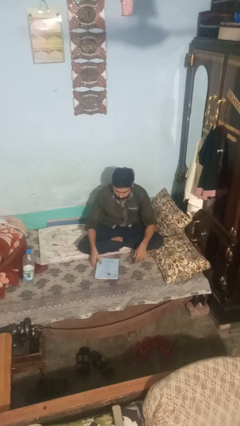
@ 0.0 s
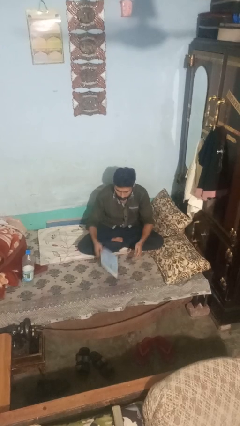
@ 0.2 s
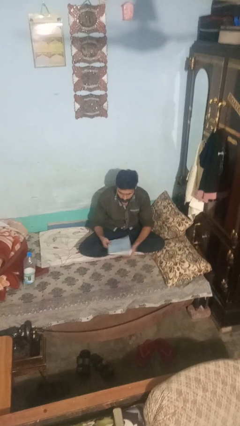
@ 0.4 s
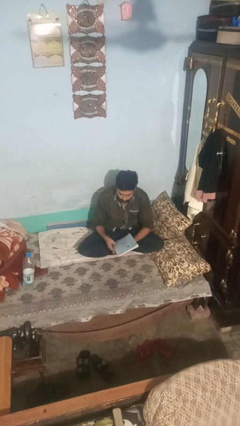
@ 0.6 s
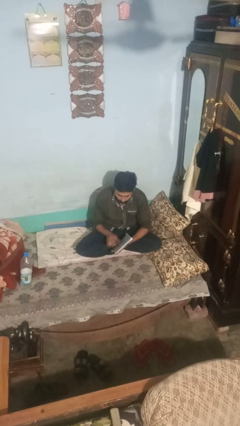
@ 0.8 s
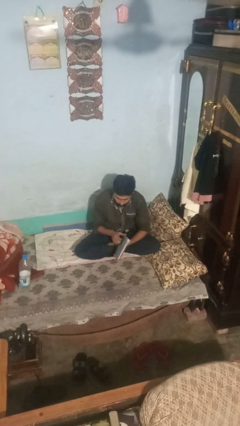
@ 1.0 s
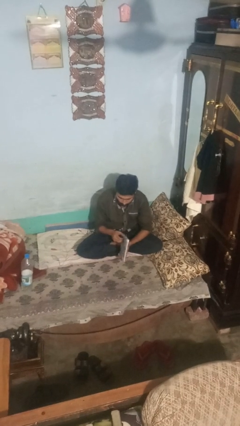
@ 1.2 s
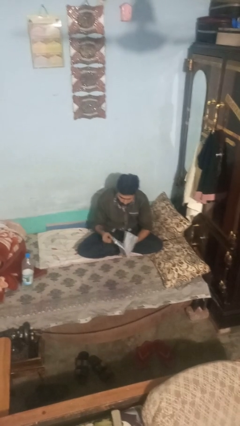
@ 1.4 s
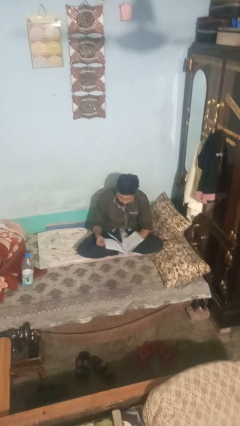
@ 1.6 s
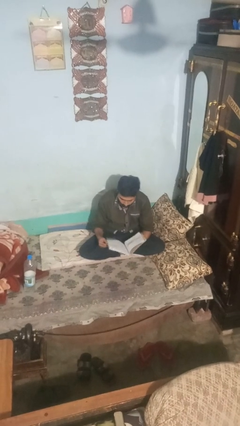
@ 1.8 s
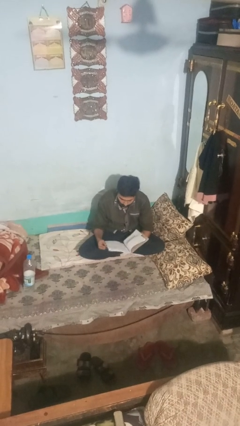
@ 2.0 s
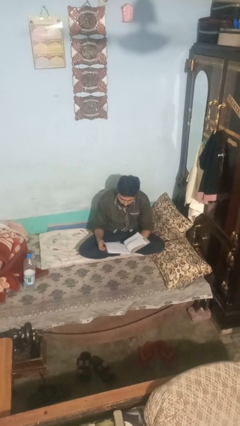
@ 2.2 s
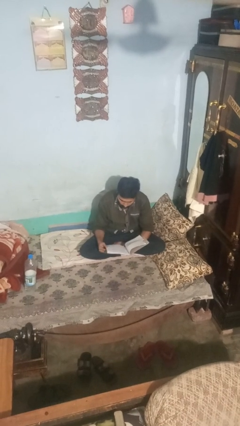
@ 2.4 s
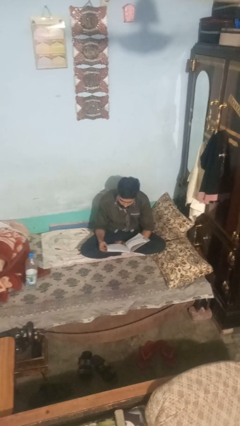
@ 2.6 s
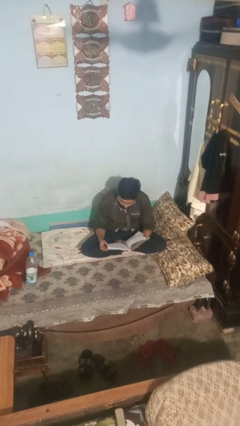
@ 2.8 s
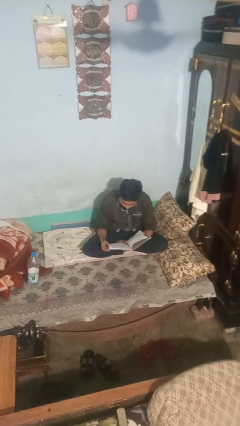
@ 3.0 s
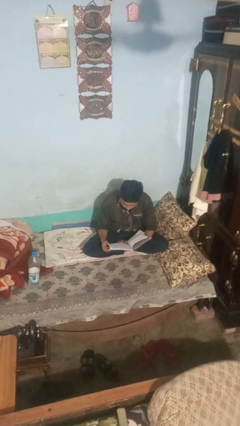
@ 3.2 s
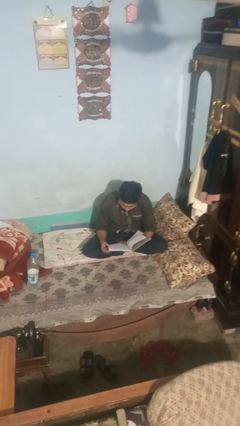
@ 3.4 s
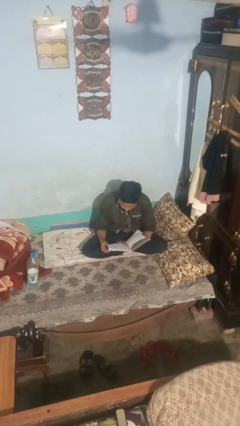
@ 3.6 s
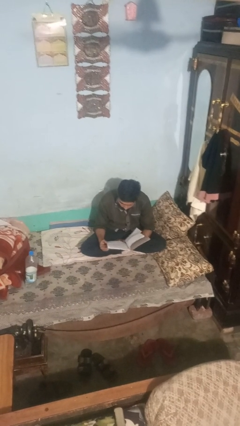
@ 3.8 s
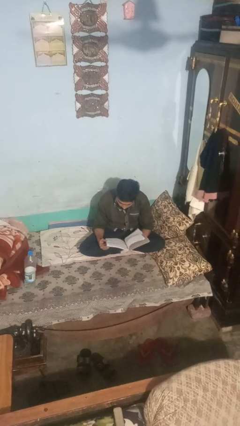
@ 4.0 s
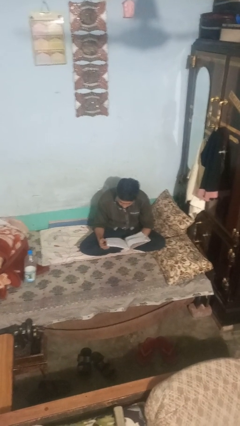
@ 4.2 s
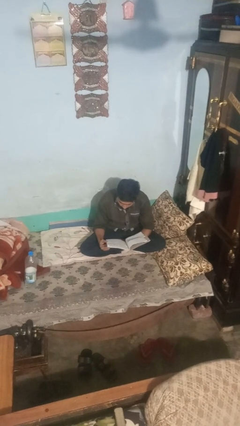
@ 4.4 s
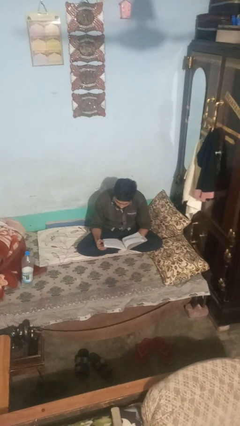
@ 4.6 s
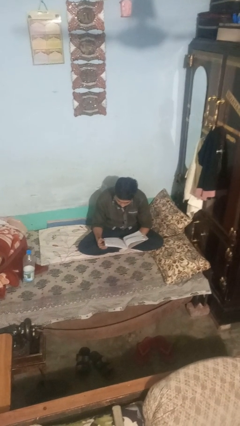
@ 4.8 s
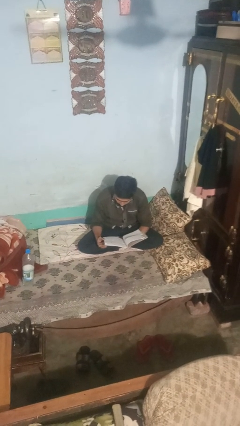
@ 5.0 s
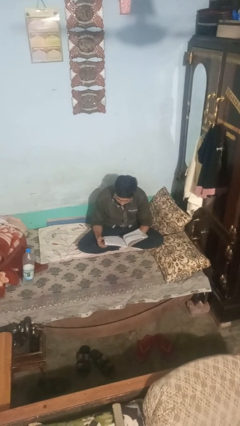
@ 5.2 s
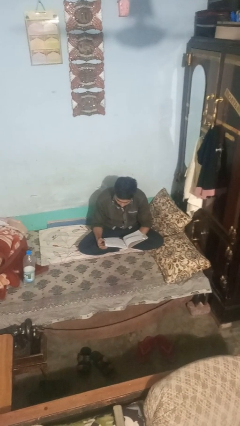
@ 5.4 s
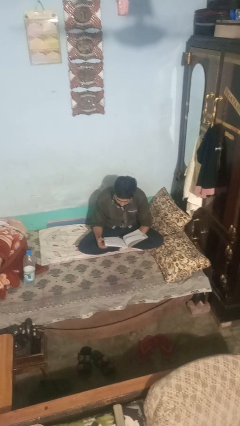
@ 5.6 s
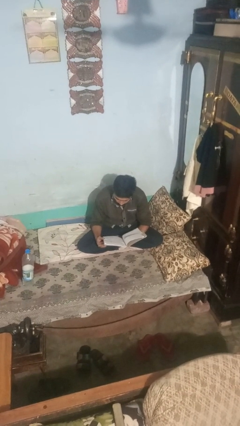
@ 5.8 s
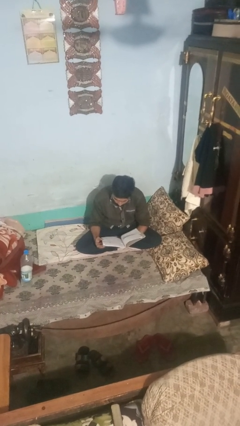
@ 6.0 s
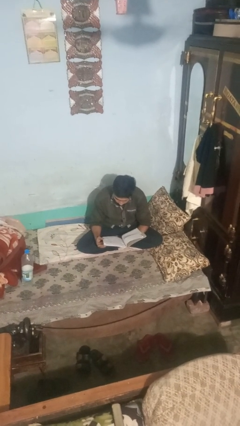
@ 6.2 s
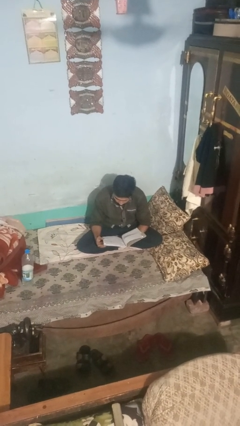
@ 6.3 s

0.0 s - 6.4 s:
person reads book

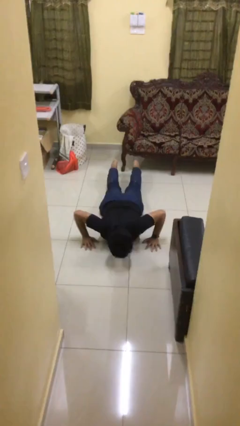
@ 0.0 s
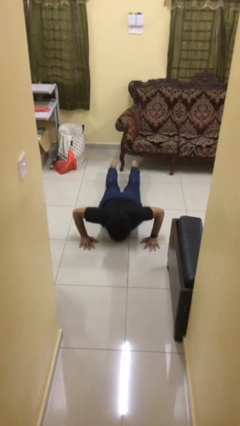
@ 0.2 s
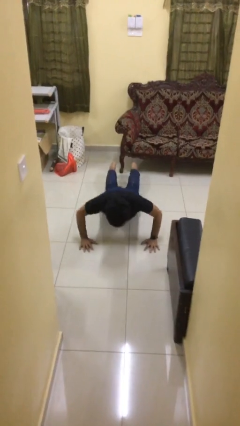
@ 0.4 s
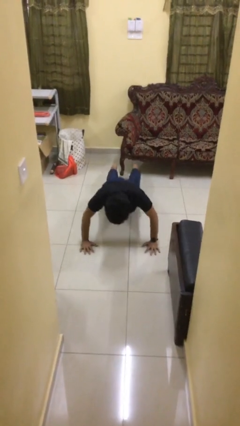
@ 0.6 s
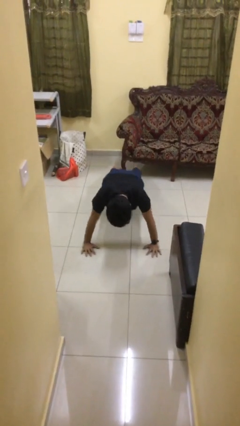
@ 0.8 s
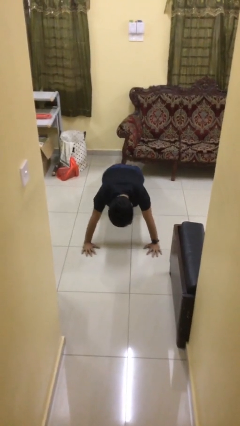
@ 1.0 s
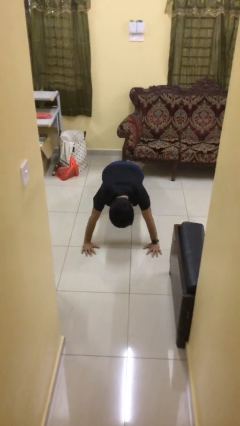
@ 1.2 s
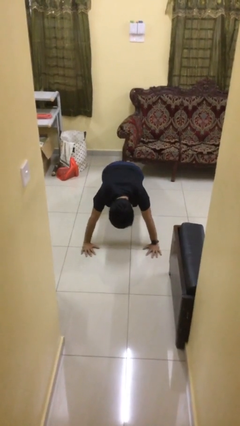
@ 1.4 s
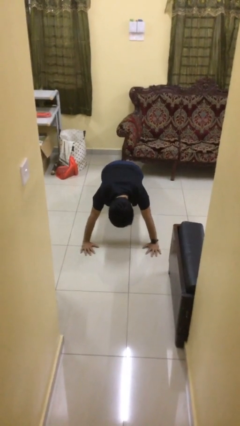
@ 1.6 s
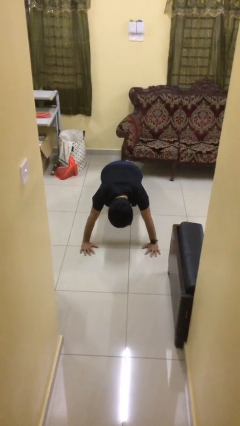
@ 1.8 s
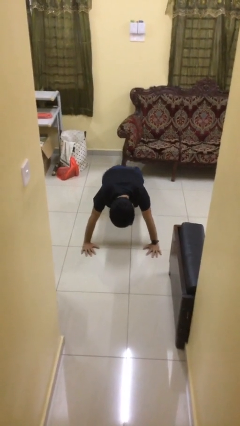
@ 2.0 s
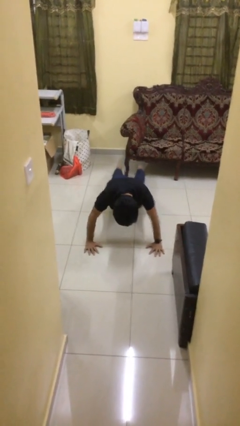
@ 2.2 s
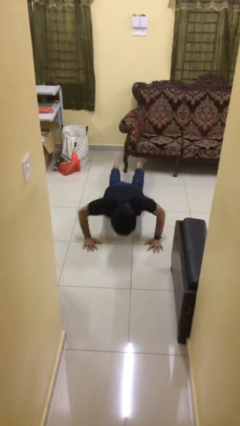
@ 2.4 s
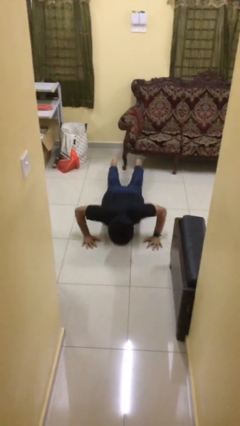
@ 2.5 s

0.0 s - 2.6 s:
person exercises with pushup

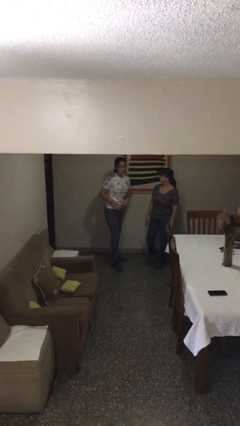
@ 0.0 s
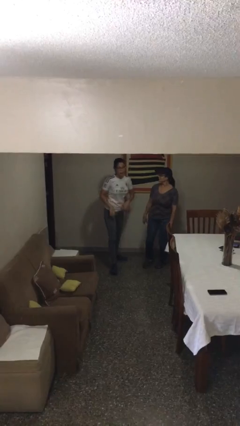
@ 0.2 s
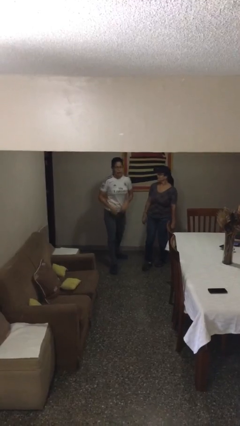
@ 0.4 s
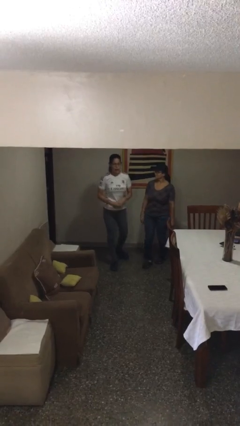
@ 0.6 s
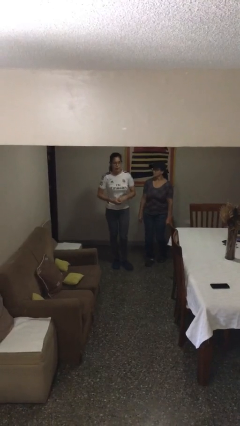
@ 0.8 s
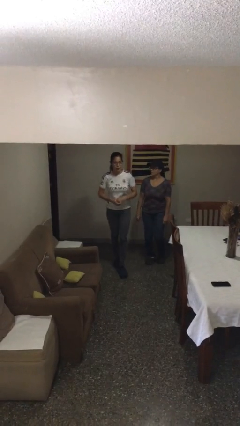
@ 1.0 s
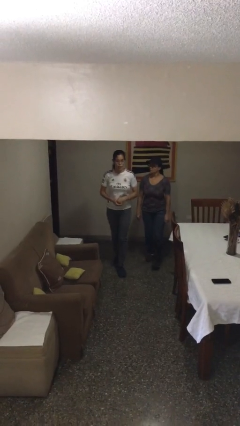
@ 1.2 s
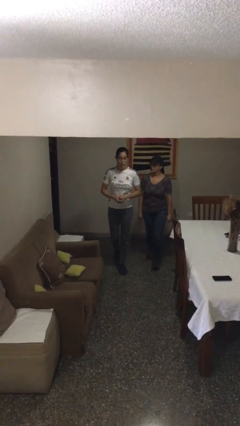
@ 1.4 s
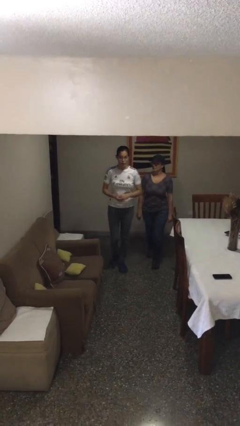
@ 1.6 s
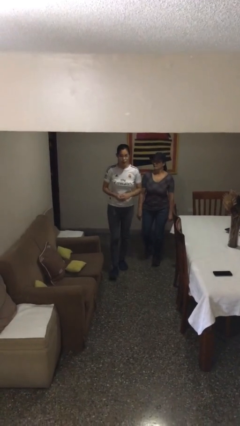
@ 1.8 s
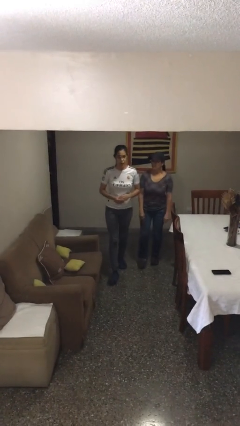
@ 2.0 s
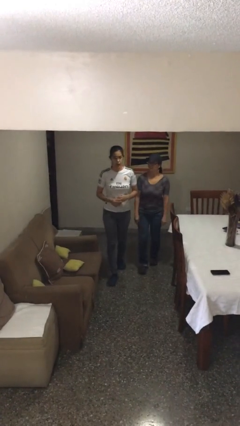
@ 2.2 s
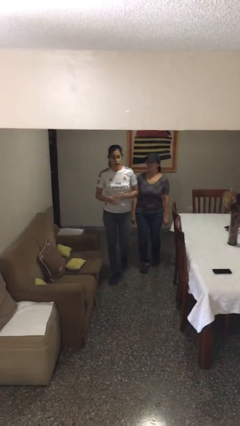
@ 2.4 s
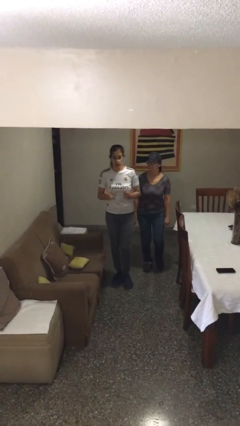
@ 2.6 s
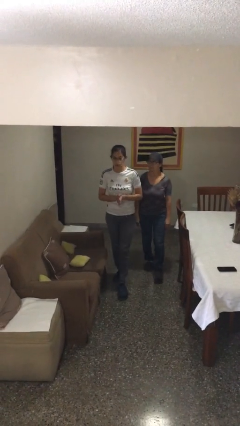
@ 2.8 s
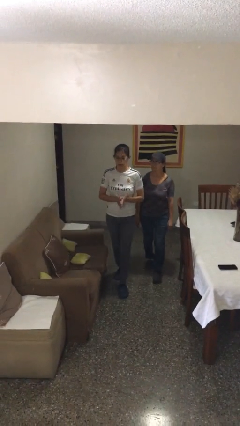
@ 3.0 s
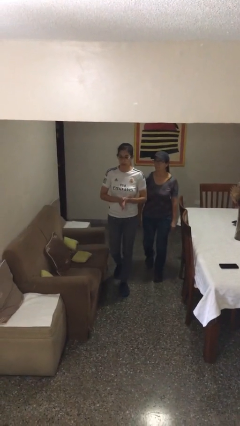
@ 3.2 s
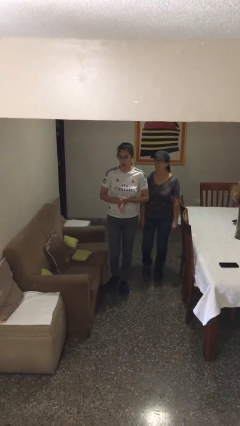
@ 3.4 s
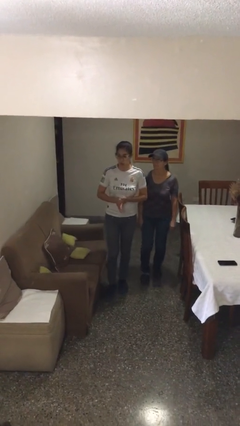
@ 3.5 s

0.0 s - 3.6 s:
person talks to person

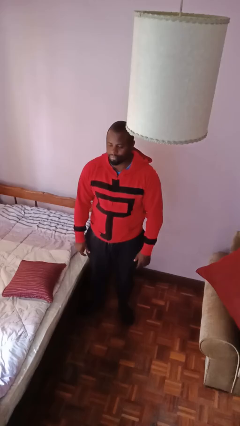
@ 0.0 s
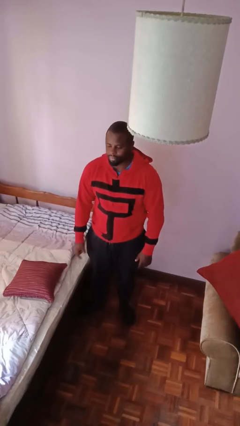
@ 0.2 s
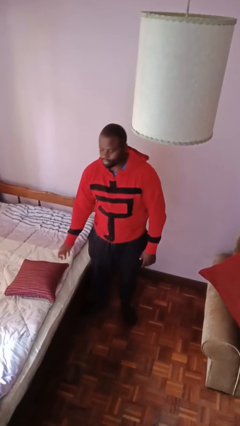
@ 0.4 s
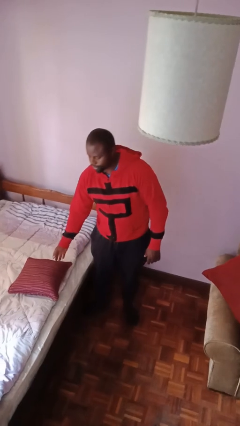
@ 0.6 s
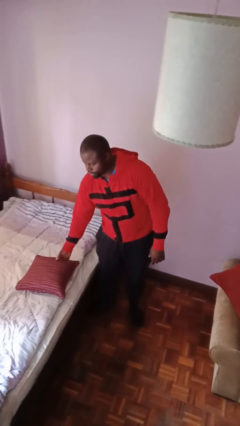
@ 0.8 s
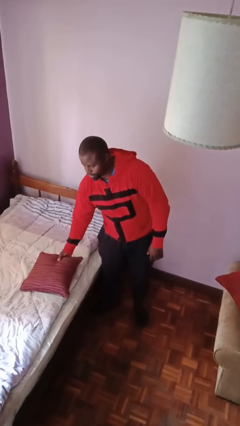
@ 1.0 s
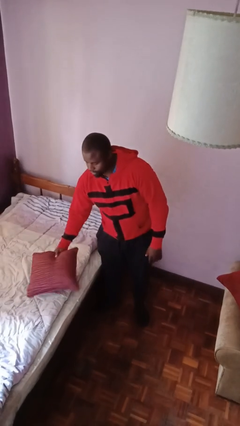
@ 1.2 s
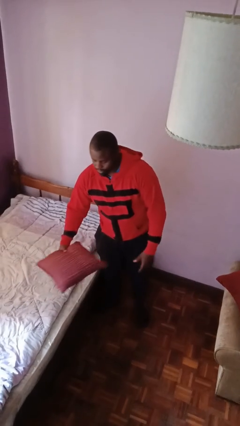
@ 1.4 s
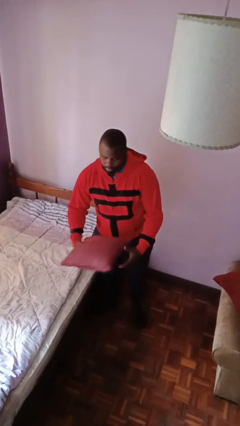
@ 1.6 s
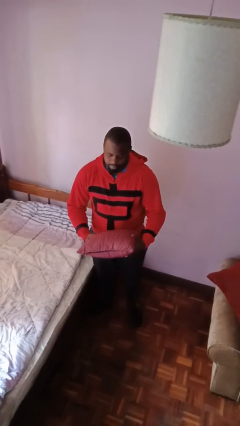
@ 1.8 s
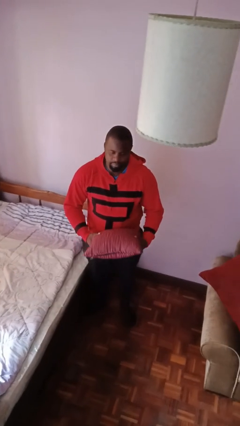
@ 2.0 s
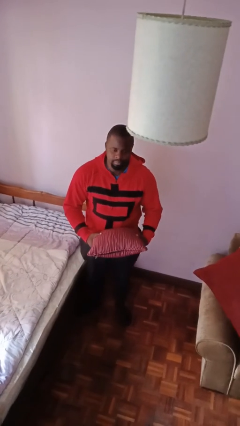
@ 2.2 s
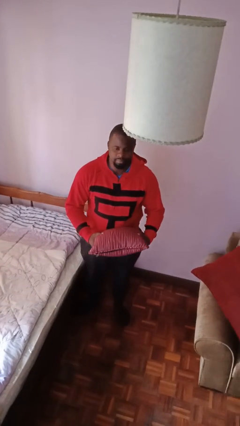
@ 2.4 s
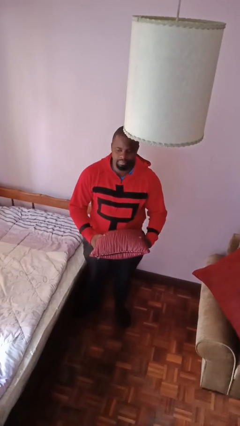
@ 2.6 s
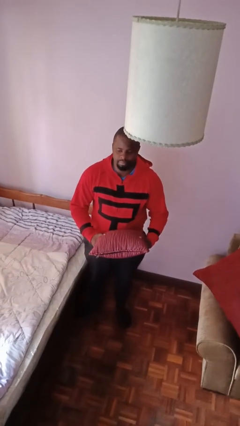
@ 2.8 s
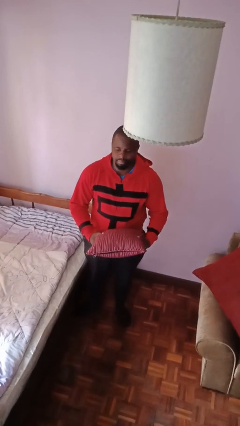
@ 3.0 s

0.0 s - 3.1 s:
person picks up object from bed

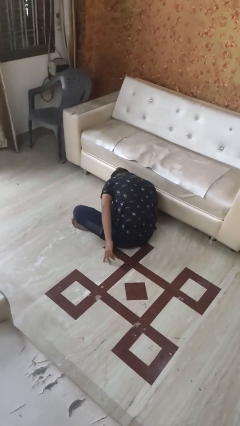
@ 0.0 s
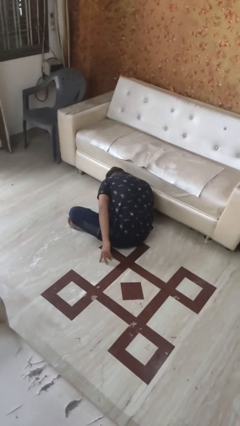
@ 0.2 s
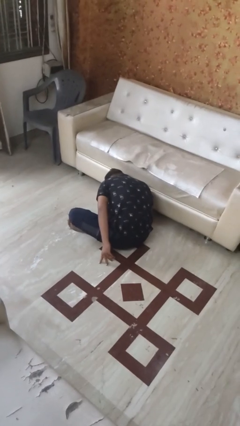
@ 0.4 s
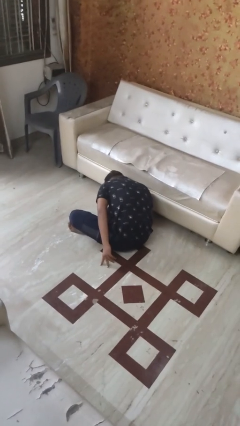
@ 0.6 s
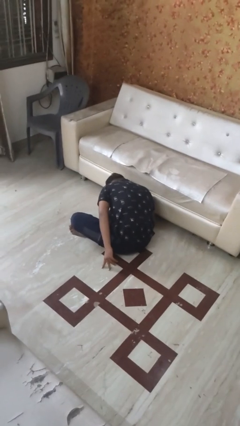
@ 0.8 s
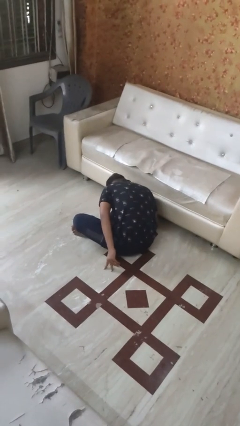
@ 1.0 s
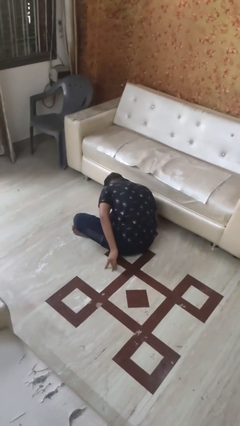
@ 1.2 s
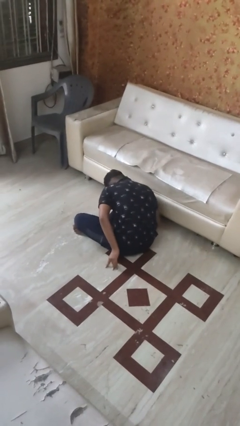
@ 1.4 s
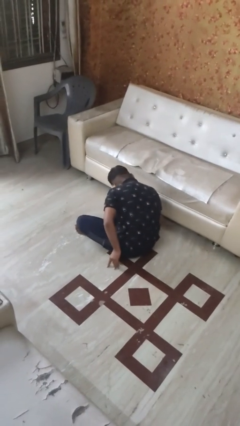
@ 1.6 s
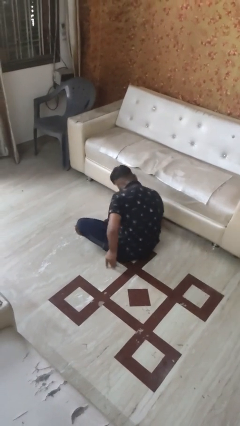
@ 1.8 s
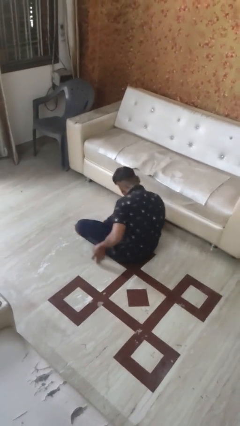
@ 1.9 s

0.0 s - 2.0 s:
person searches under bed
